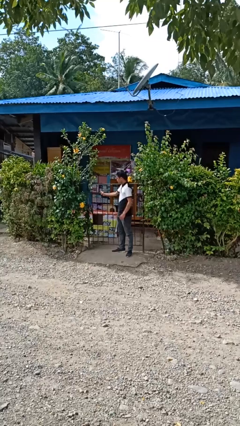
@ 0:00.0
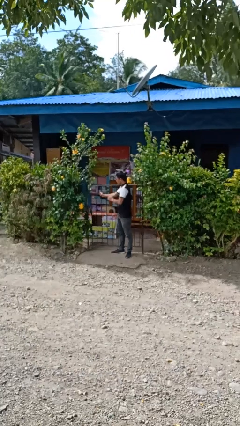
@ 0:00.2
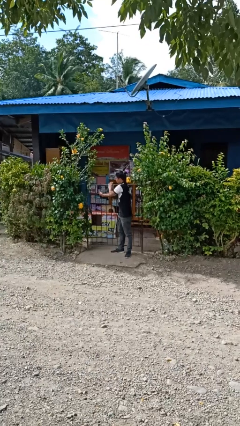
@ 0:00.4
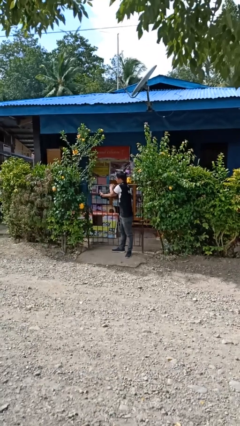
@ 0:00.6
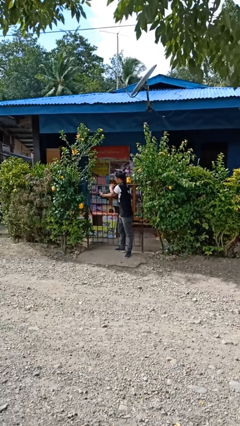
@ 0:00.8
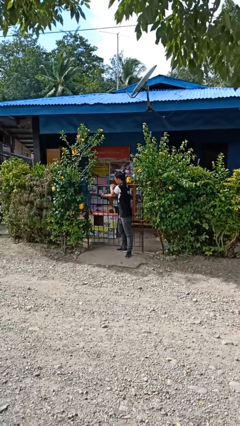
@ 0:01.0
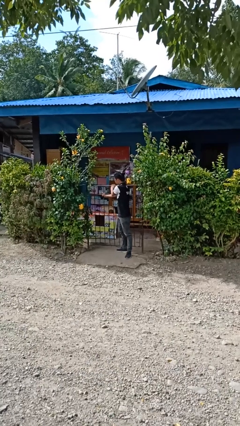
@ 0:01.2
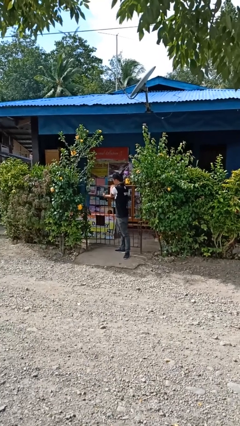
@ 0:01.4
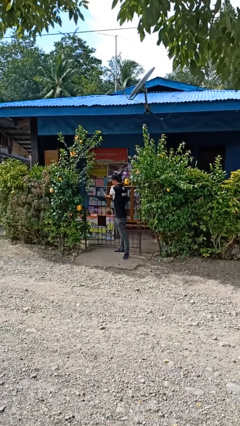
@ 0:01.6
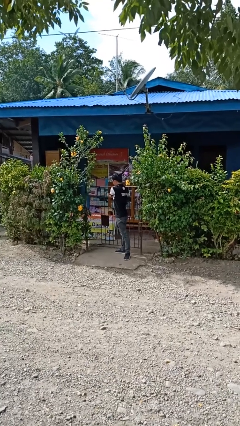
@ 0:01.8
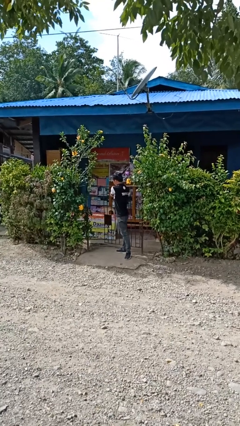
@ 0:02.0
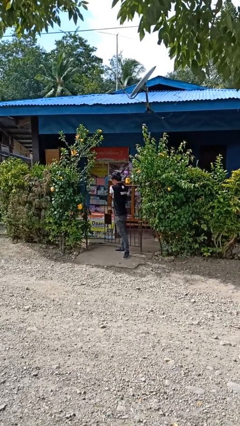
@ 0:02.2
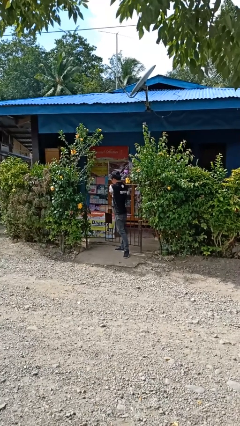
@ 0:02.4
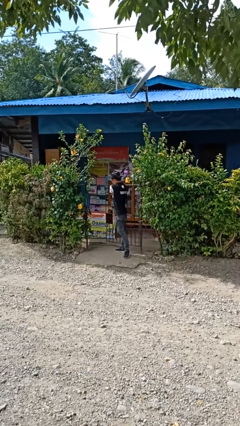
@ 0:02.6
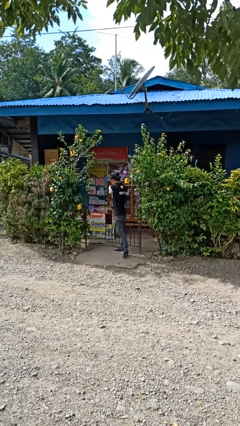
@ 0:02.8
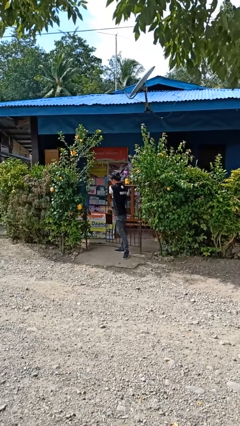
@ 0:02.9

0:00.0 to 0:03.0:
person opens gate

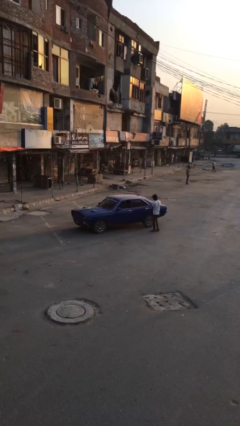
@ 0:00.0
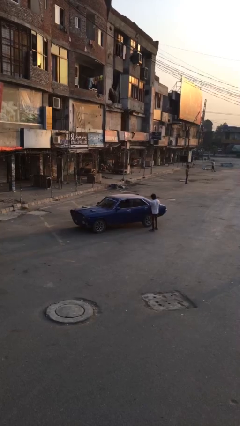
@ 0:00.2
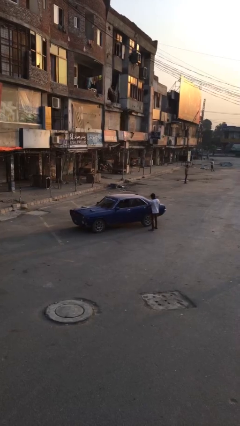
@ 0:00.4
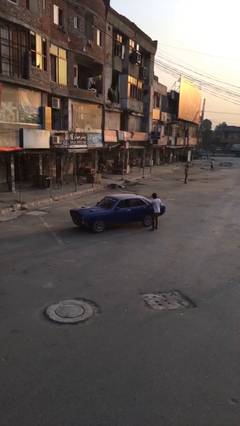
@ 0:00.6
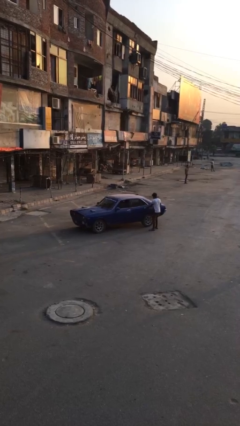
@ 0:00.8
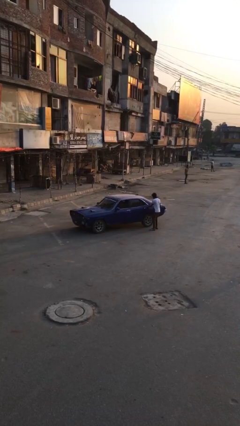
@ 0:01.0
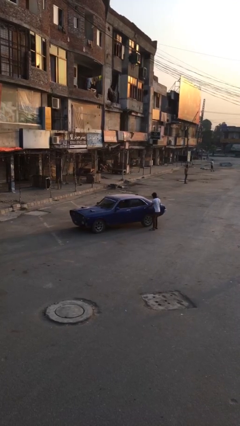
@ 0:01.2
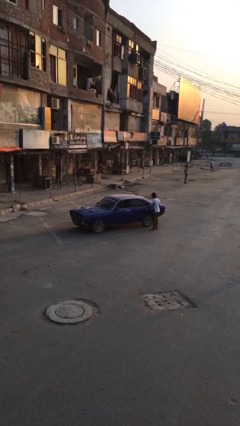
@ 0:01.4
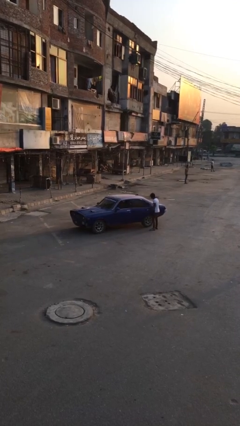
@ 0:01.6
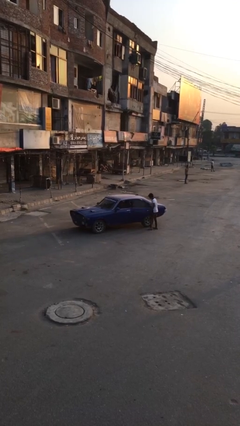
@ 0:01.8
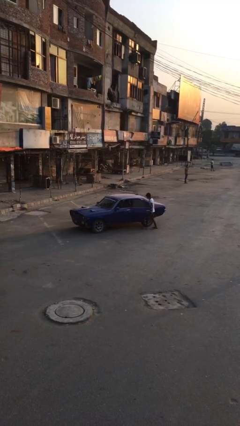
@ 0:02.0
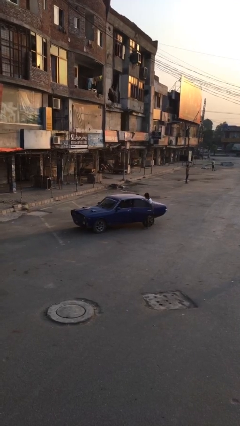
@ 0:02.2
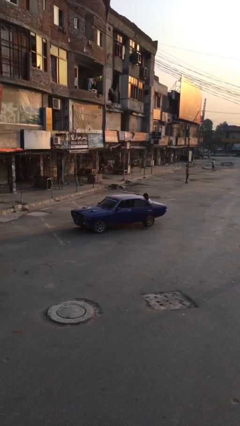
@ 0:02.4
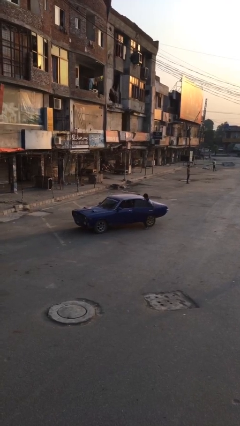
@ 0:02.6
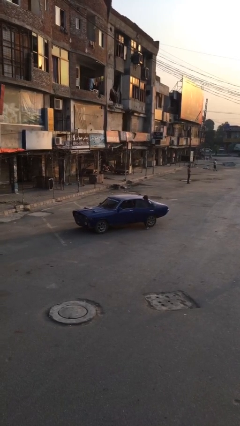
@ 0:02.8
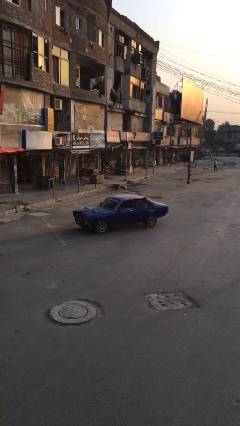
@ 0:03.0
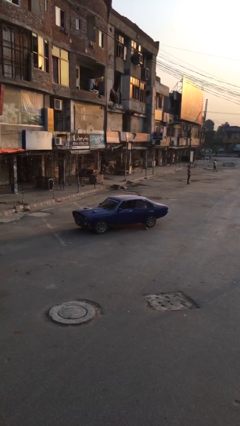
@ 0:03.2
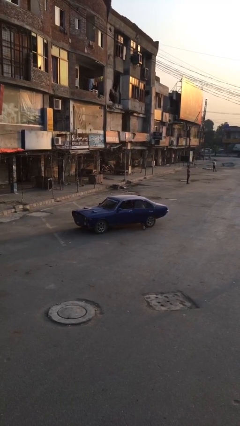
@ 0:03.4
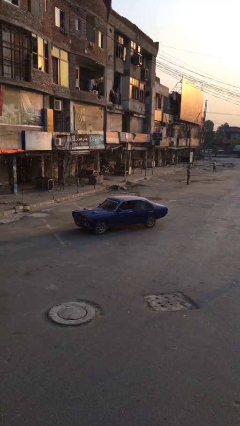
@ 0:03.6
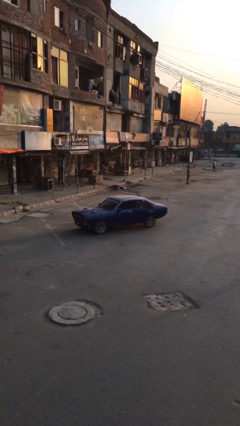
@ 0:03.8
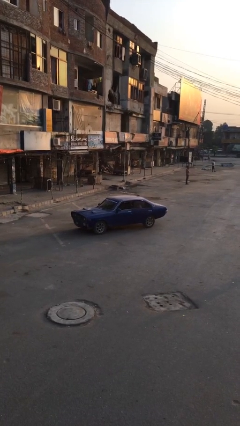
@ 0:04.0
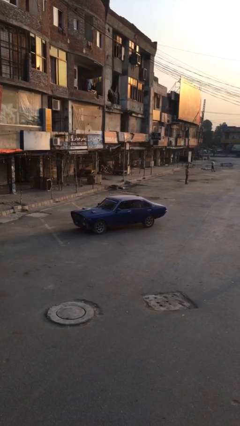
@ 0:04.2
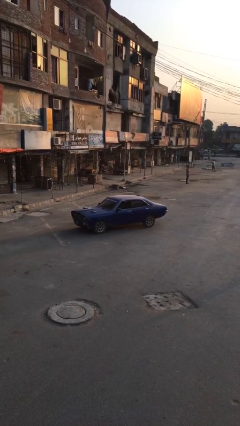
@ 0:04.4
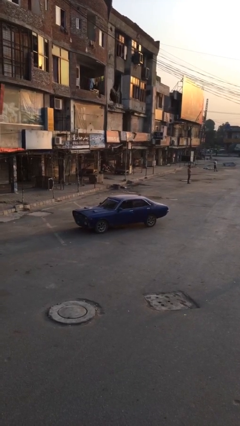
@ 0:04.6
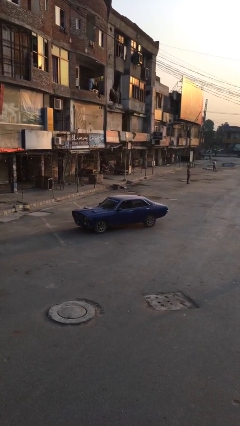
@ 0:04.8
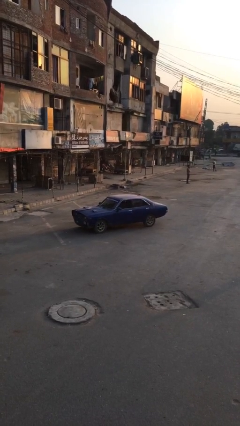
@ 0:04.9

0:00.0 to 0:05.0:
car picks up person

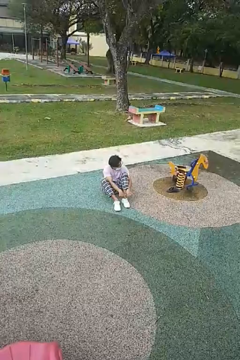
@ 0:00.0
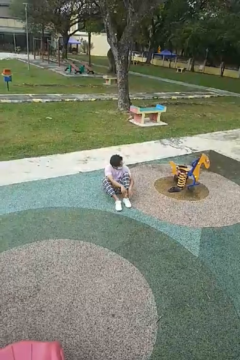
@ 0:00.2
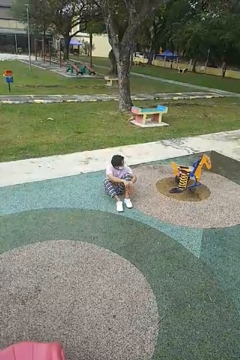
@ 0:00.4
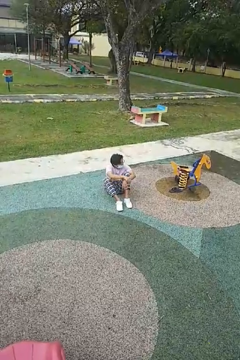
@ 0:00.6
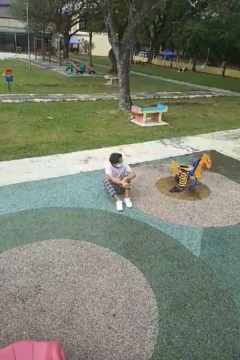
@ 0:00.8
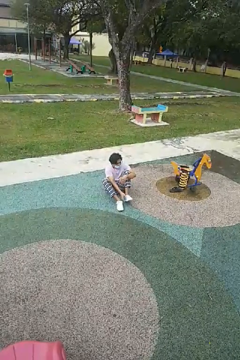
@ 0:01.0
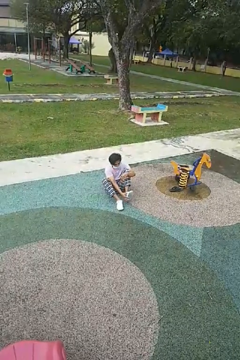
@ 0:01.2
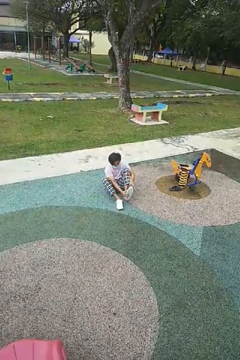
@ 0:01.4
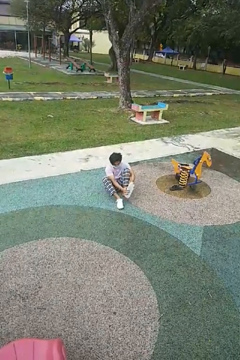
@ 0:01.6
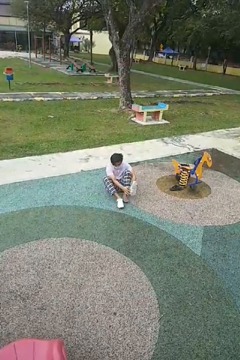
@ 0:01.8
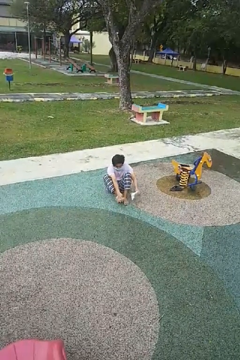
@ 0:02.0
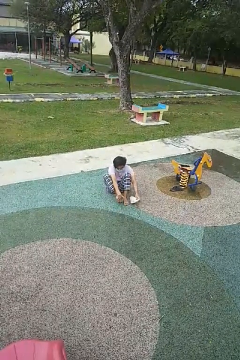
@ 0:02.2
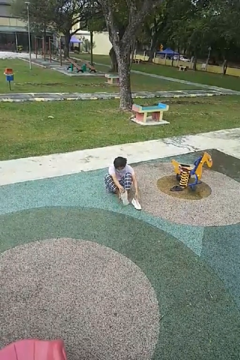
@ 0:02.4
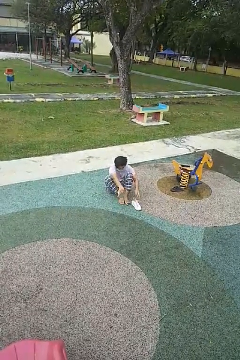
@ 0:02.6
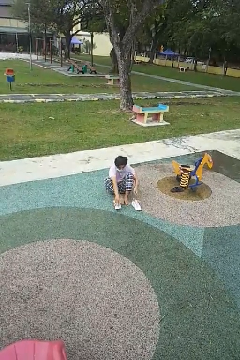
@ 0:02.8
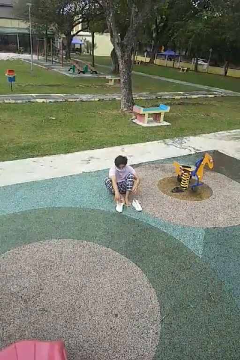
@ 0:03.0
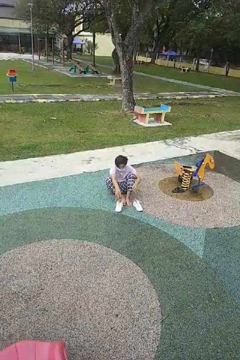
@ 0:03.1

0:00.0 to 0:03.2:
person takes off shoes

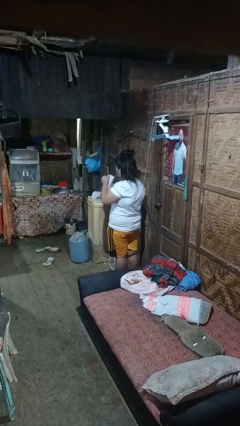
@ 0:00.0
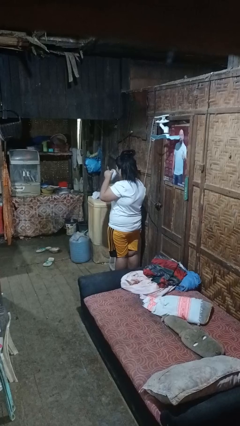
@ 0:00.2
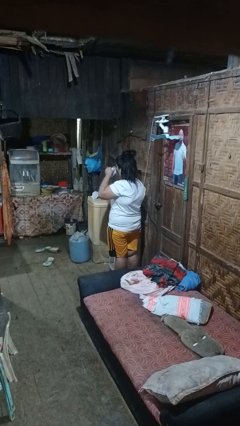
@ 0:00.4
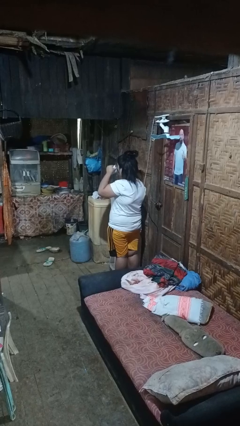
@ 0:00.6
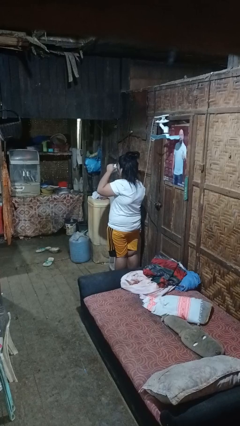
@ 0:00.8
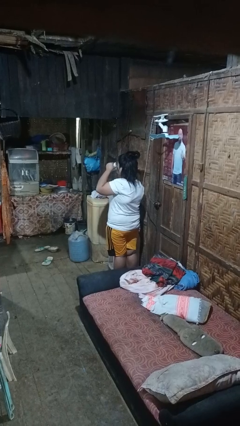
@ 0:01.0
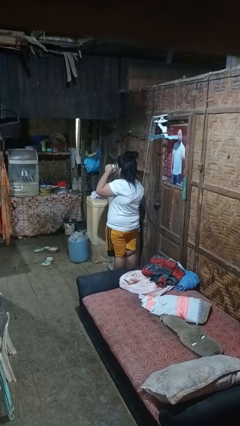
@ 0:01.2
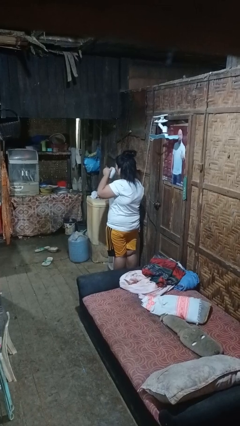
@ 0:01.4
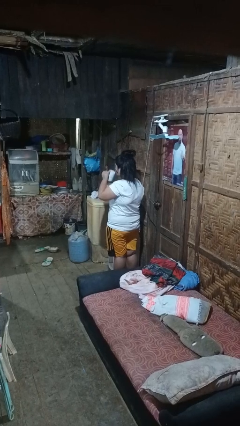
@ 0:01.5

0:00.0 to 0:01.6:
person drinks from mug

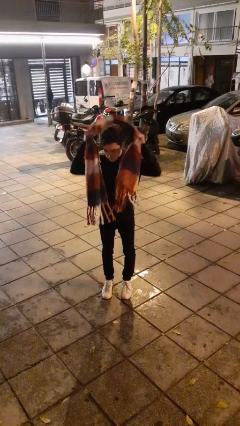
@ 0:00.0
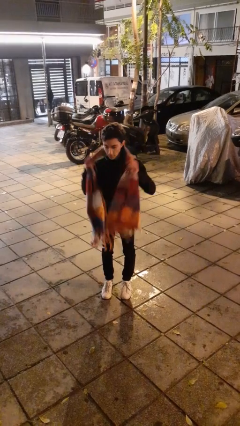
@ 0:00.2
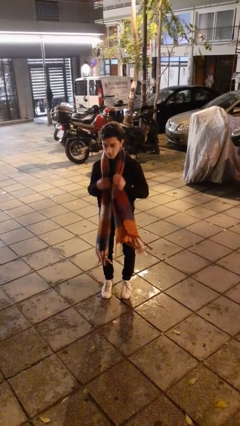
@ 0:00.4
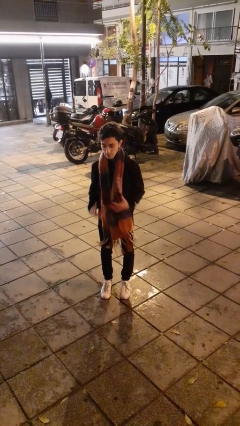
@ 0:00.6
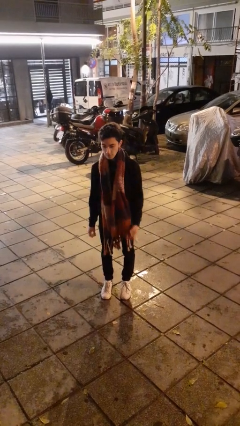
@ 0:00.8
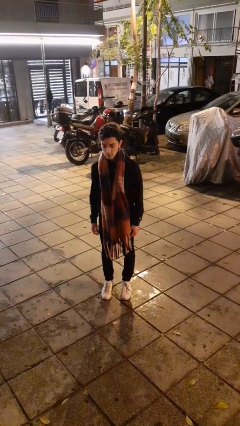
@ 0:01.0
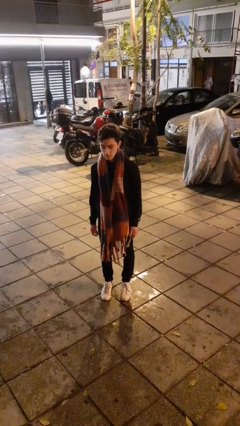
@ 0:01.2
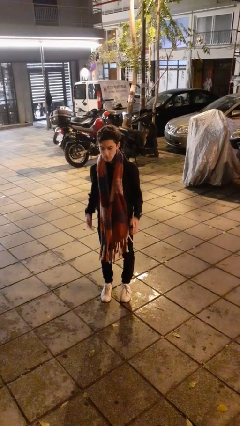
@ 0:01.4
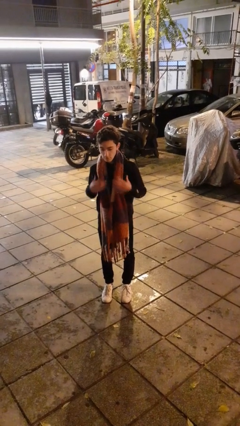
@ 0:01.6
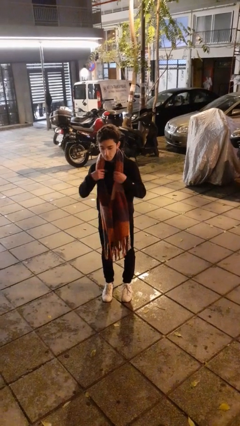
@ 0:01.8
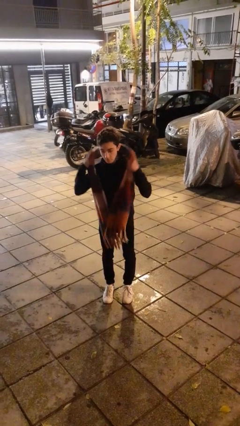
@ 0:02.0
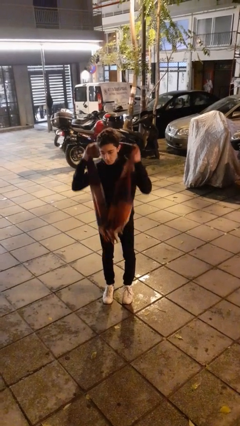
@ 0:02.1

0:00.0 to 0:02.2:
person puts on scarf

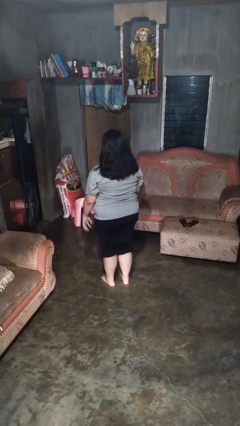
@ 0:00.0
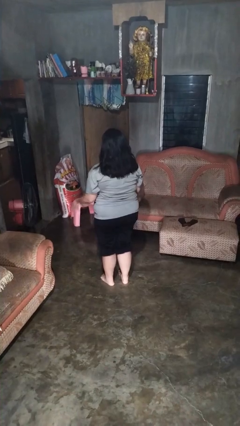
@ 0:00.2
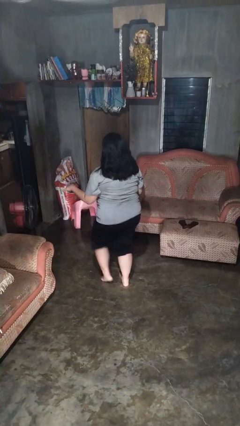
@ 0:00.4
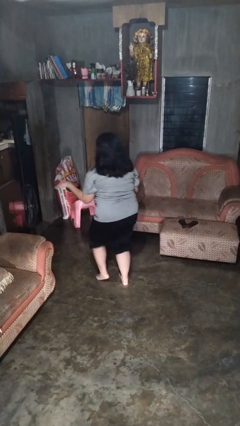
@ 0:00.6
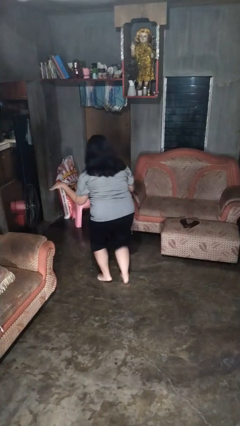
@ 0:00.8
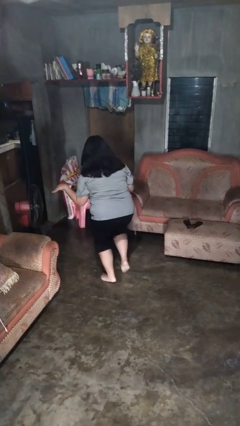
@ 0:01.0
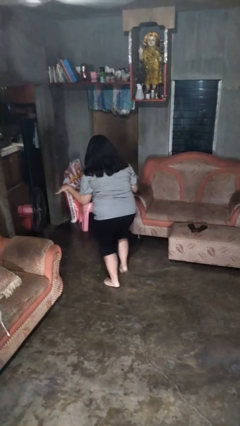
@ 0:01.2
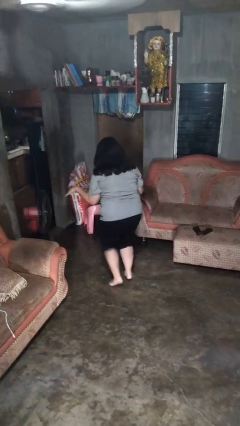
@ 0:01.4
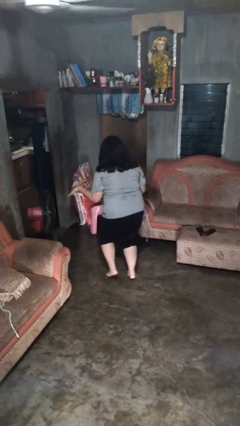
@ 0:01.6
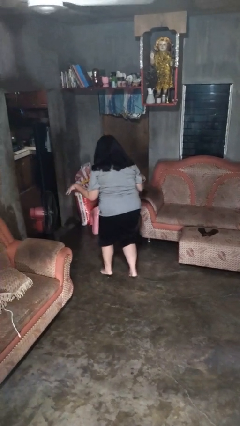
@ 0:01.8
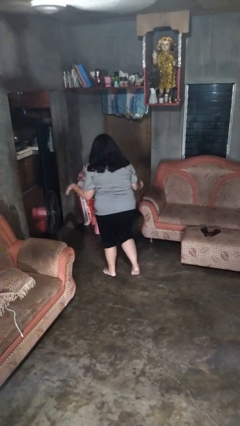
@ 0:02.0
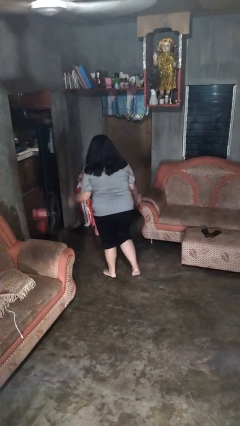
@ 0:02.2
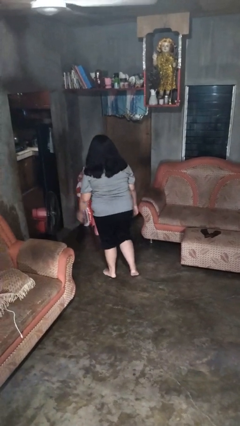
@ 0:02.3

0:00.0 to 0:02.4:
person walks tiptoe

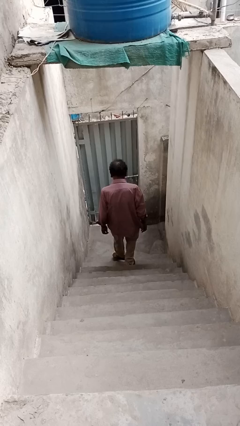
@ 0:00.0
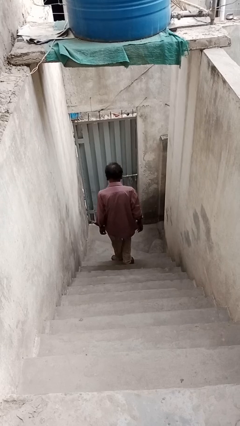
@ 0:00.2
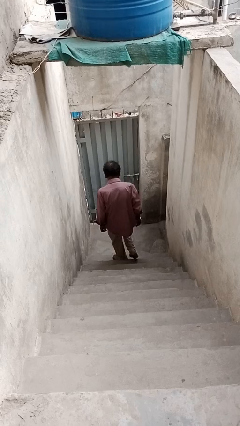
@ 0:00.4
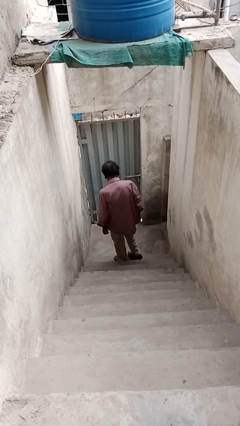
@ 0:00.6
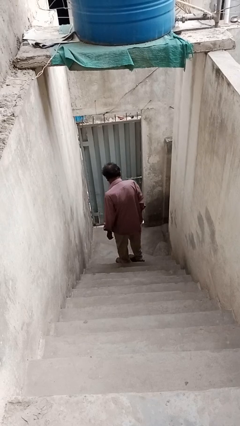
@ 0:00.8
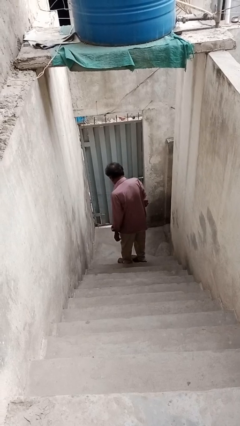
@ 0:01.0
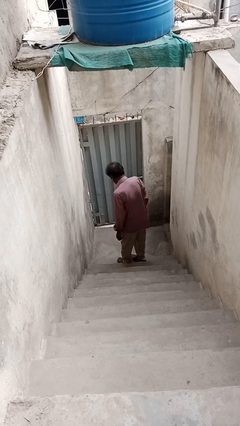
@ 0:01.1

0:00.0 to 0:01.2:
person climbs down stairs
